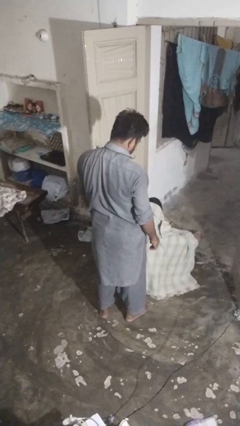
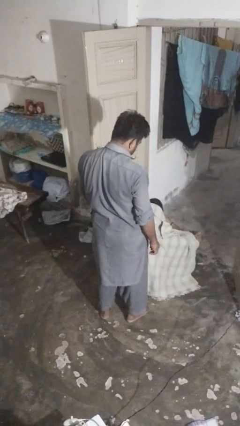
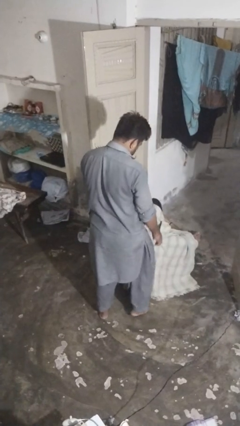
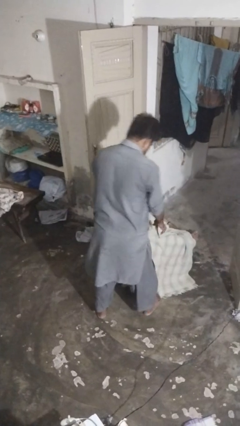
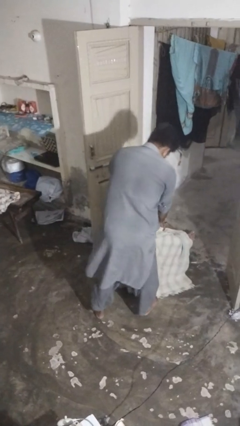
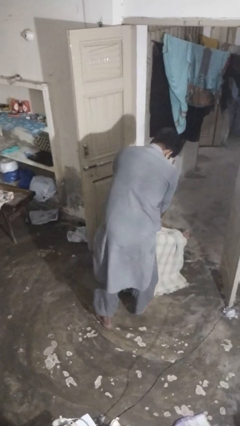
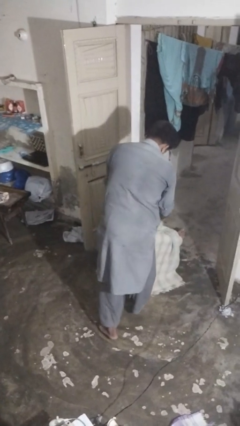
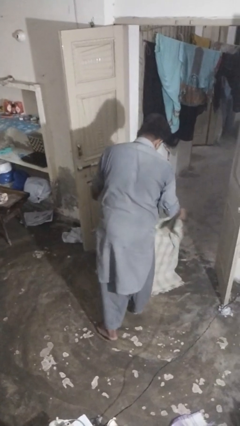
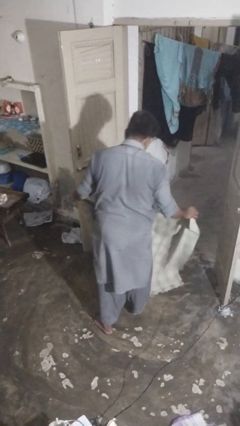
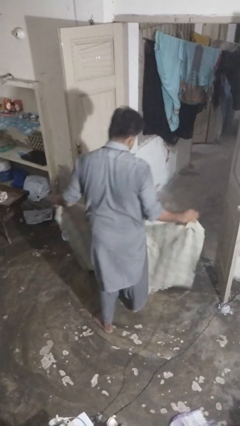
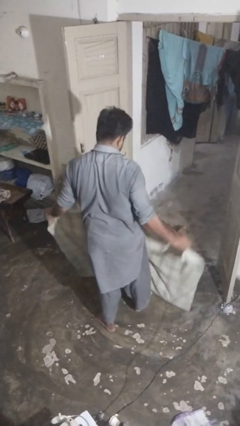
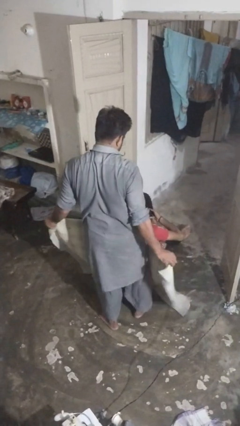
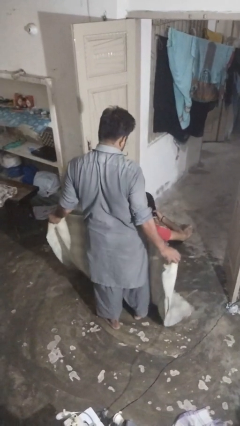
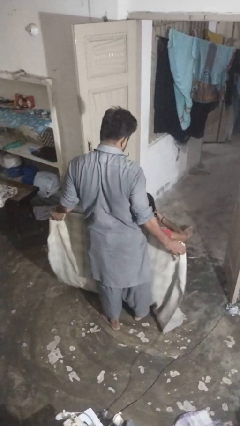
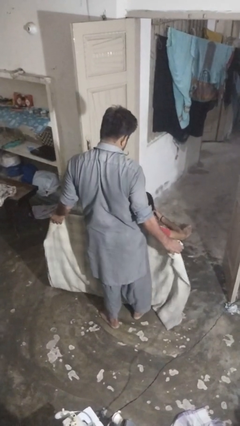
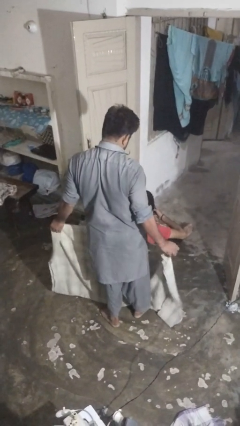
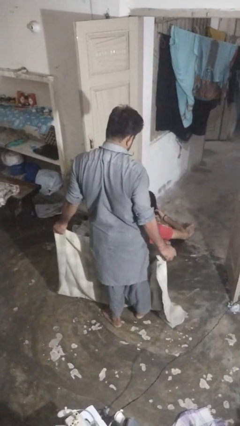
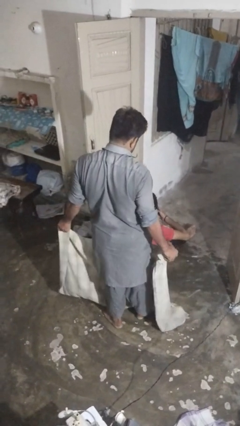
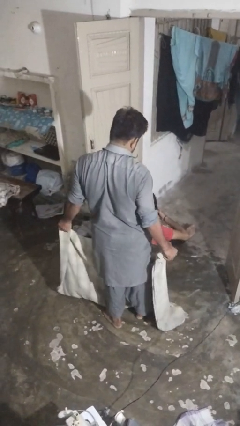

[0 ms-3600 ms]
person uncovers friend with blanket

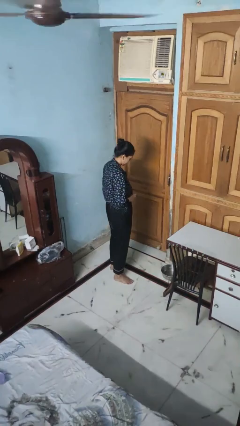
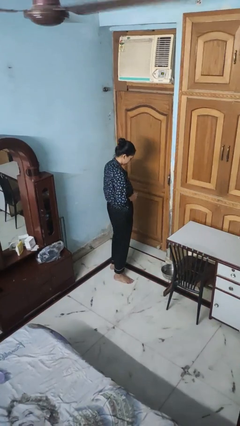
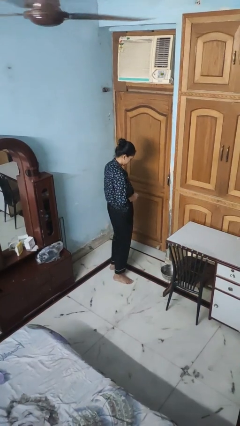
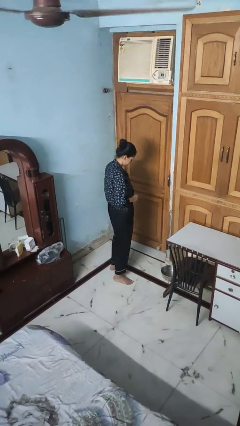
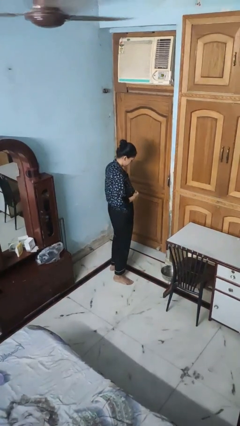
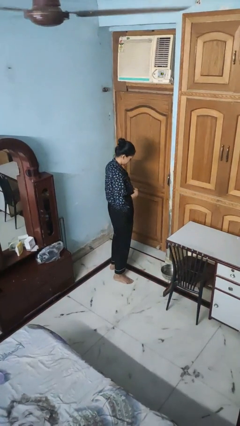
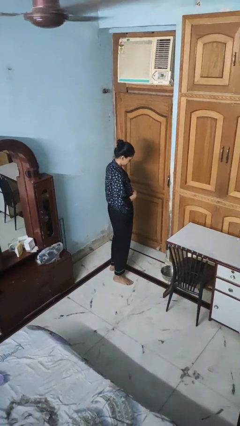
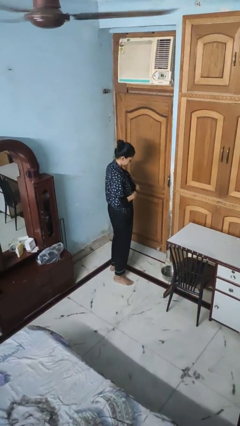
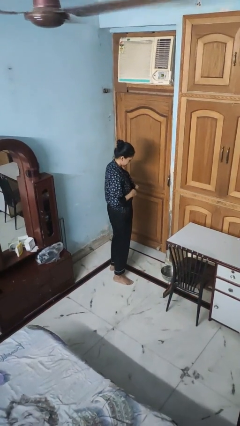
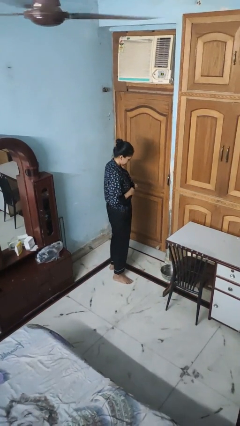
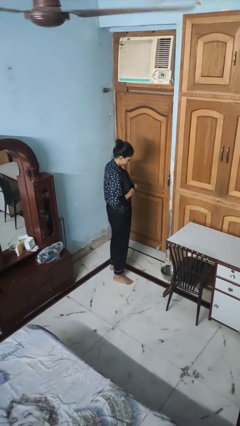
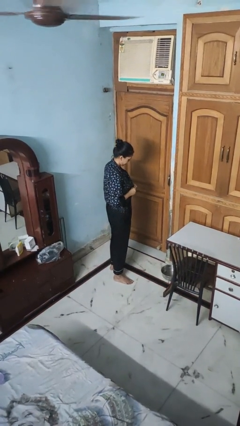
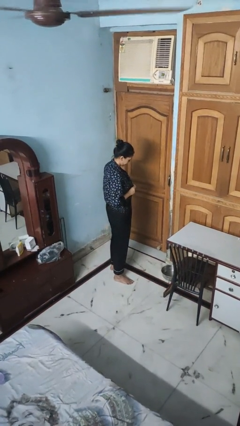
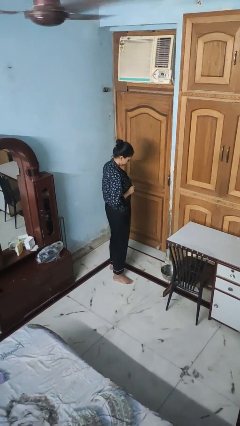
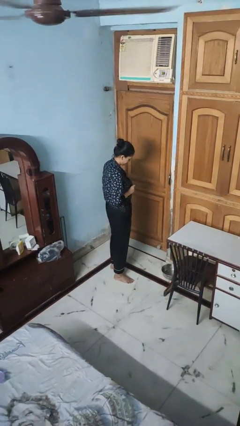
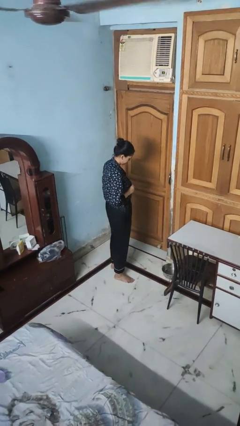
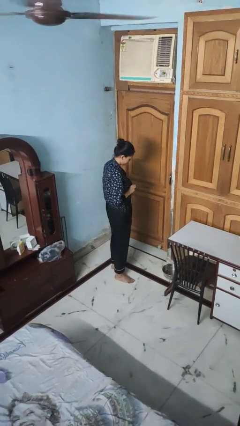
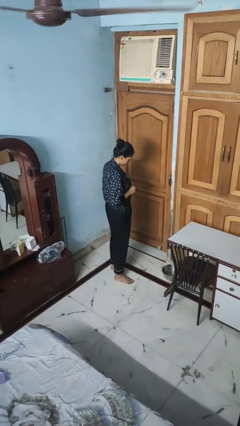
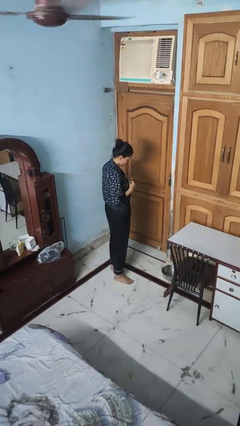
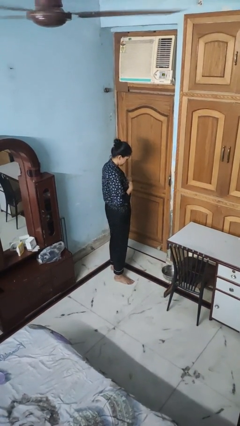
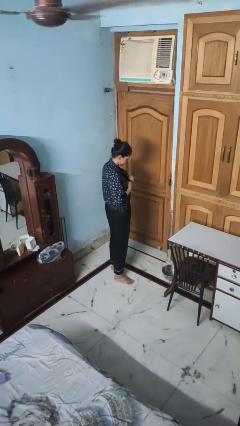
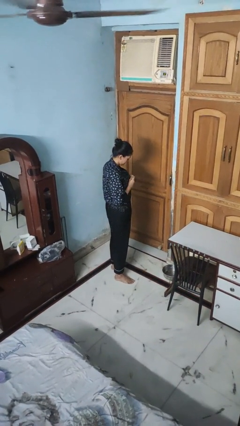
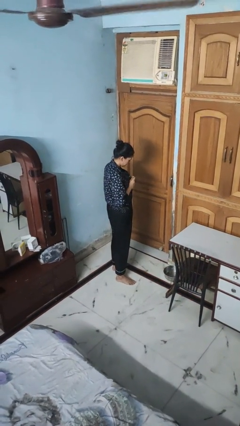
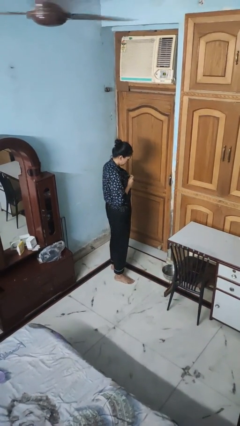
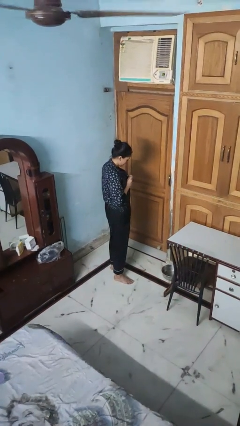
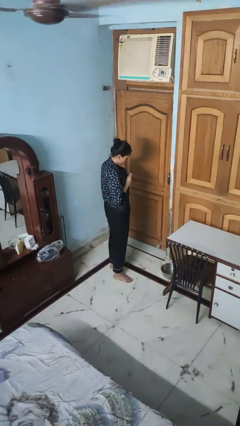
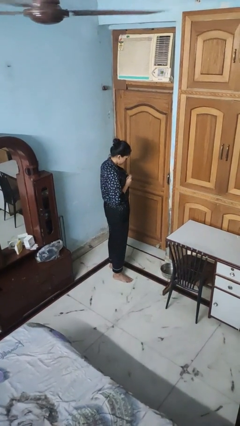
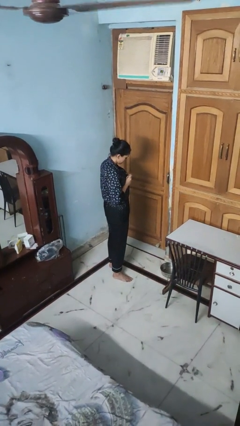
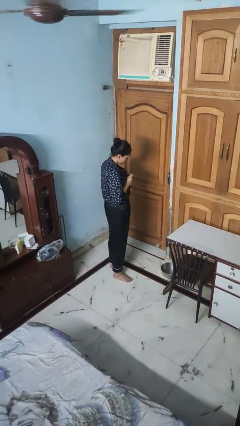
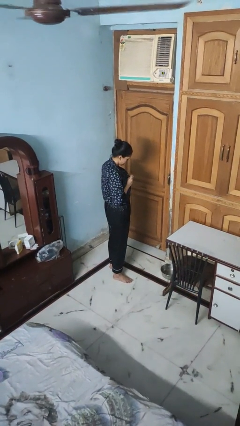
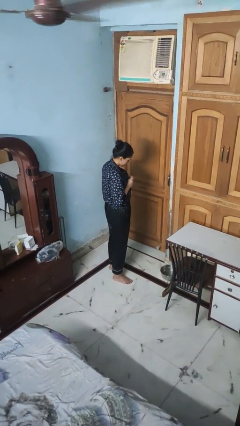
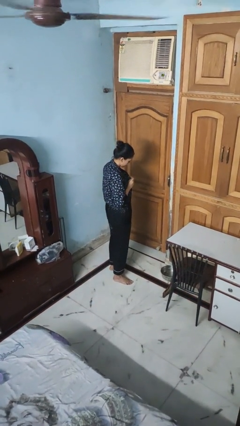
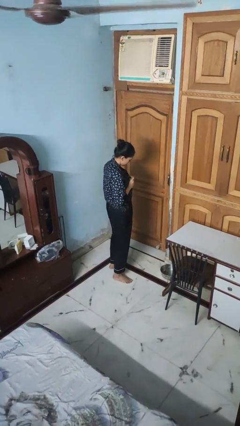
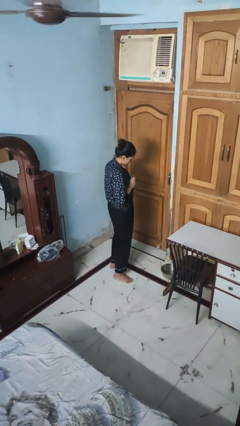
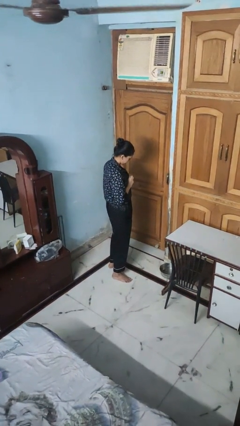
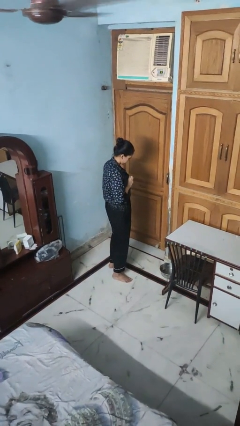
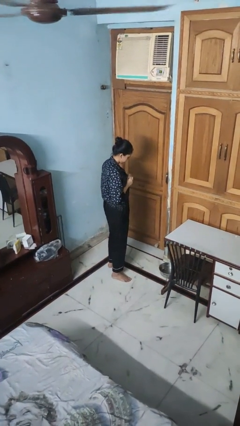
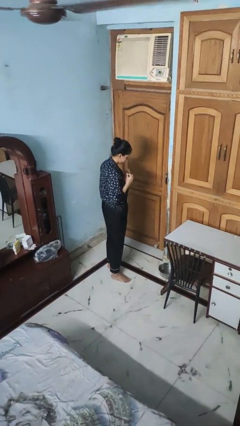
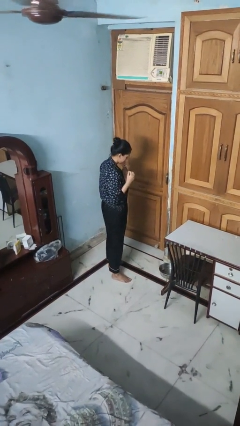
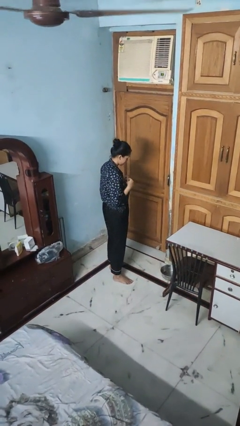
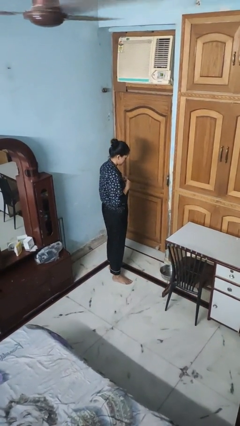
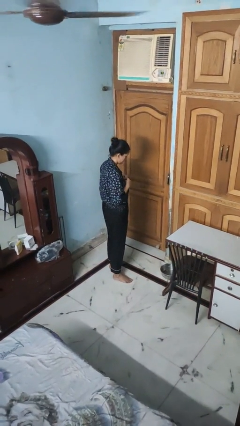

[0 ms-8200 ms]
person buttons shirt

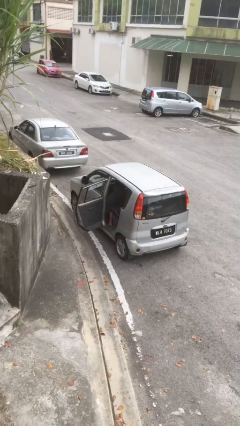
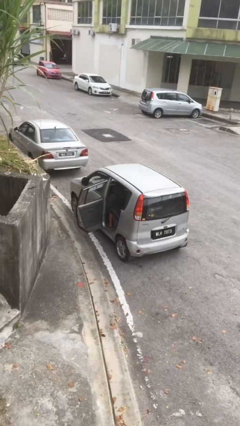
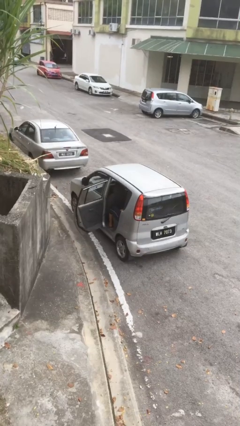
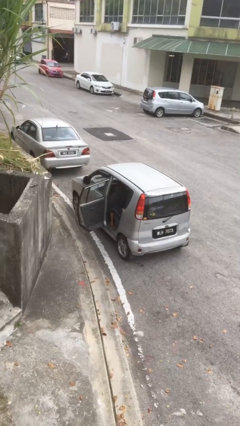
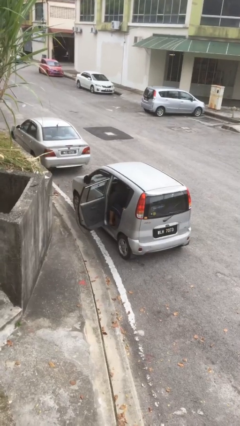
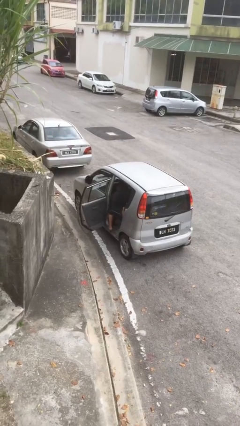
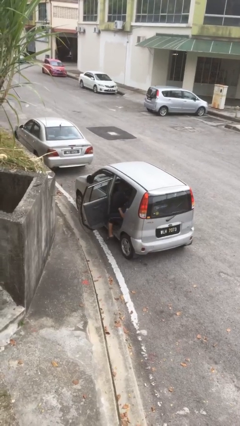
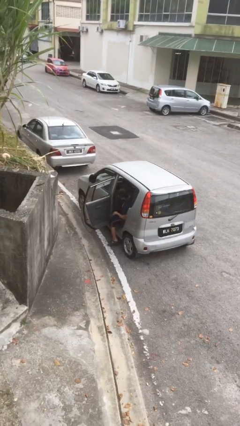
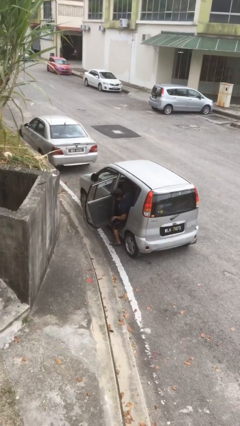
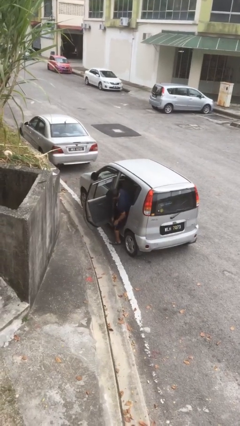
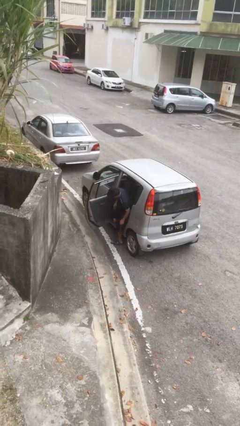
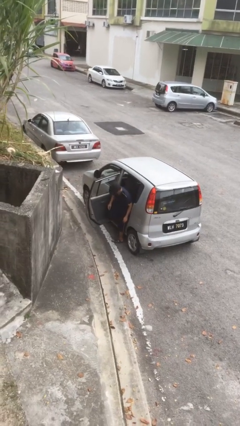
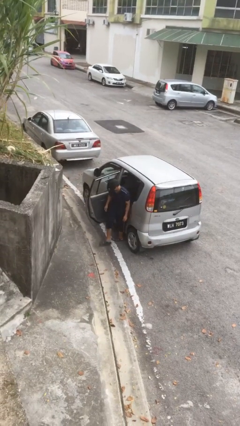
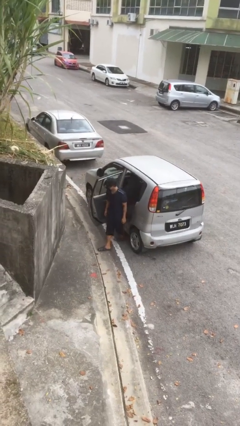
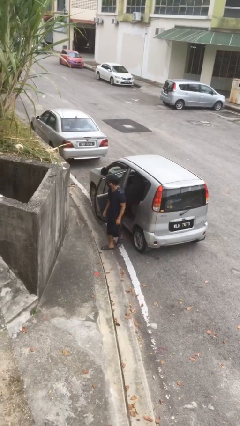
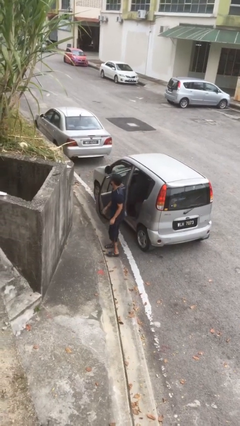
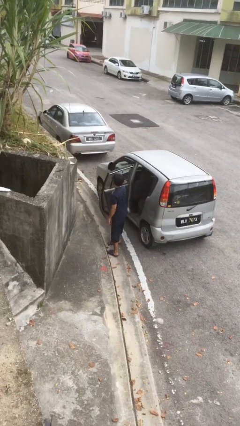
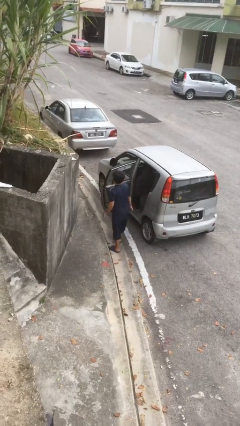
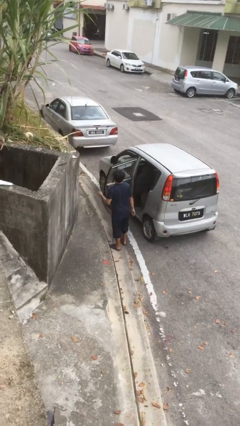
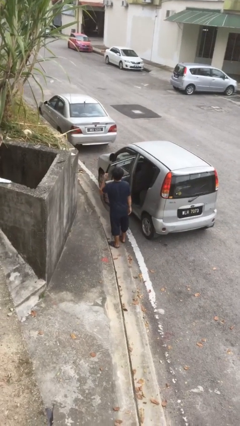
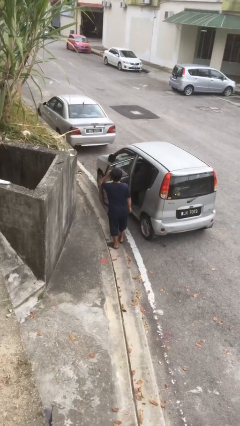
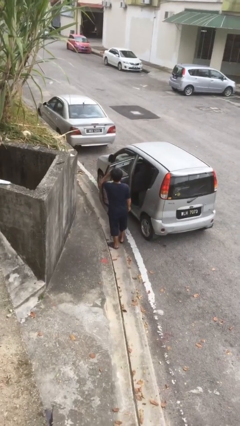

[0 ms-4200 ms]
person exits car

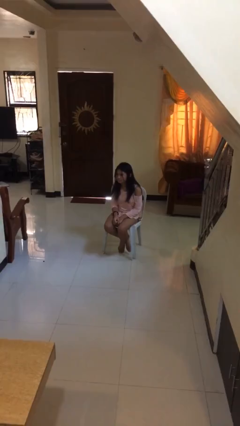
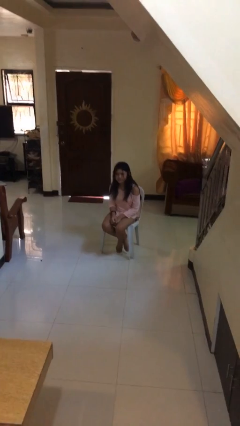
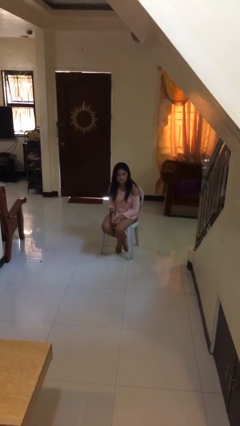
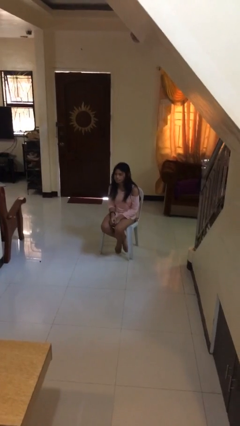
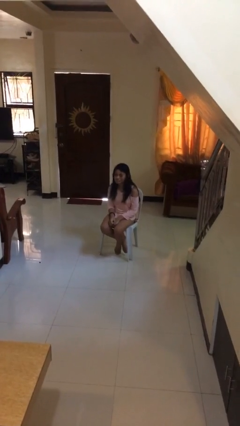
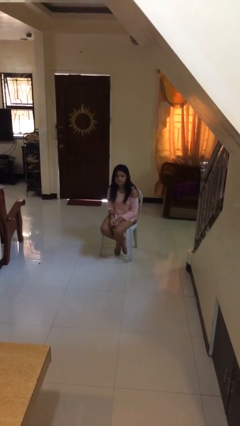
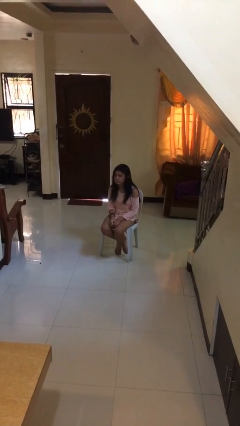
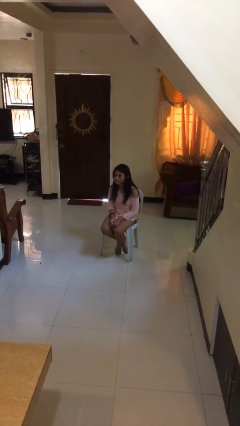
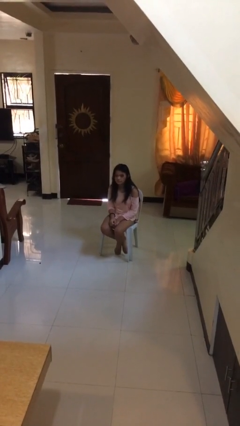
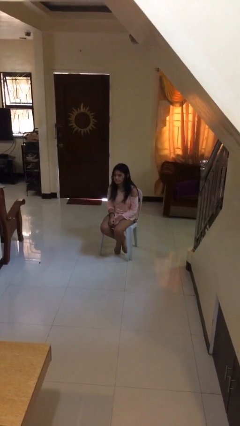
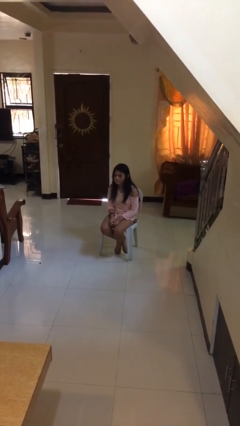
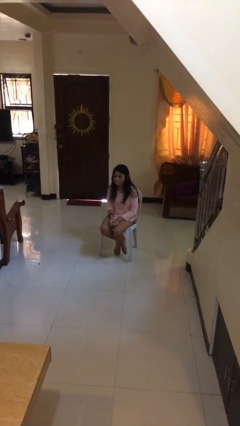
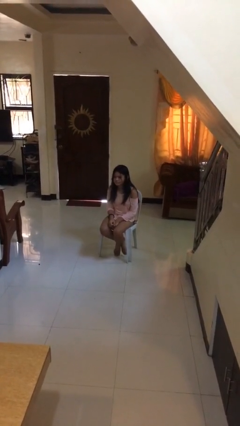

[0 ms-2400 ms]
person shakes head
